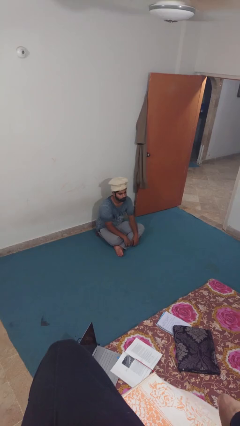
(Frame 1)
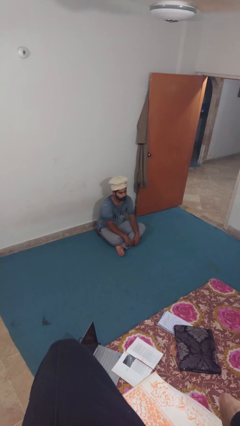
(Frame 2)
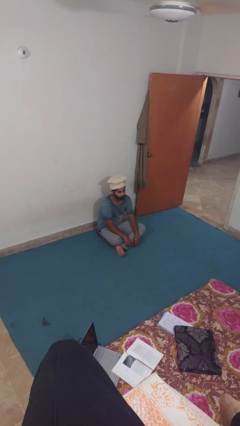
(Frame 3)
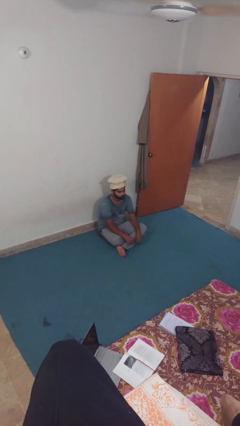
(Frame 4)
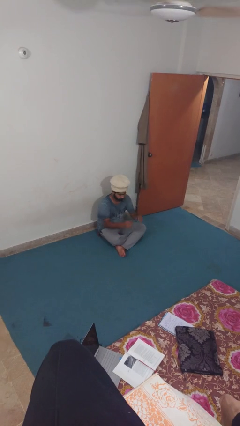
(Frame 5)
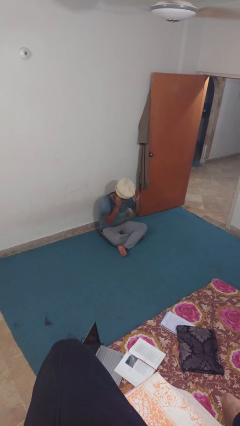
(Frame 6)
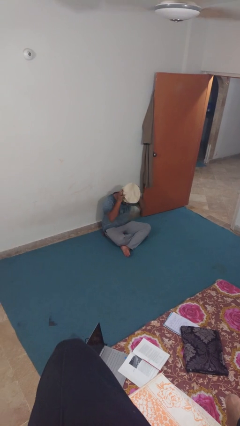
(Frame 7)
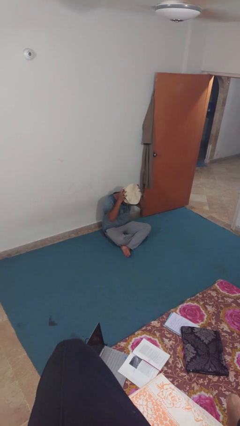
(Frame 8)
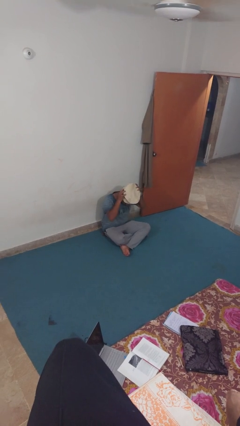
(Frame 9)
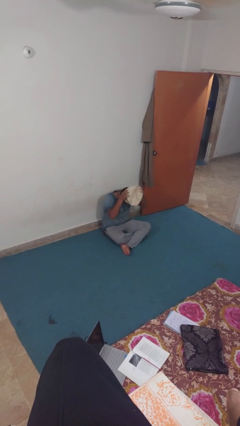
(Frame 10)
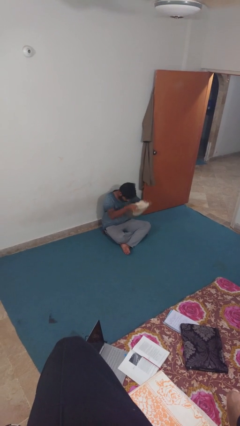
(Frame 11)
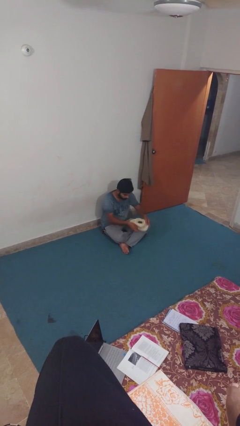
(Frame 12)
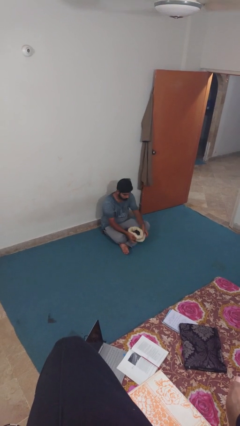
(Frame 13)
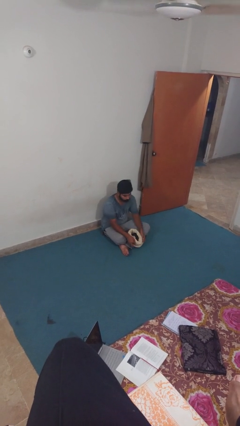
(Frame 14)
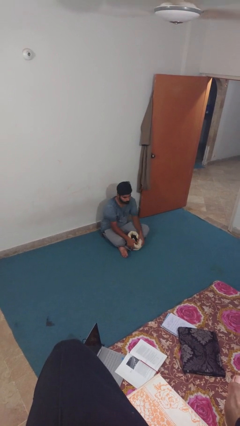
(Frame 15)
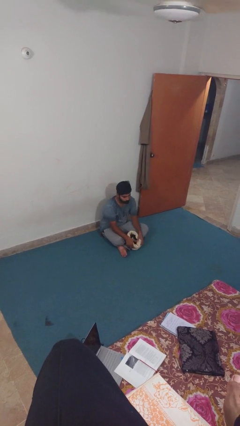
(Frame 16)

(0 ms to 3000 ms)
person takes off hat

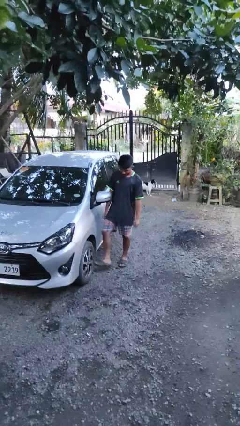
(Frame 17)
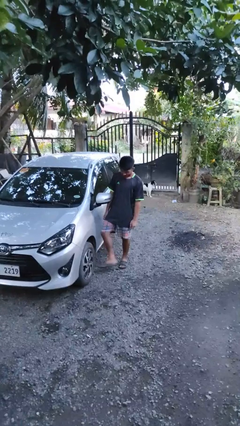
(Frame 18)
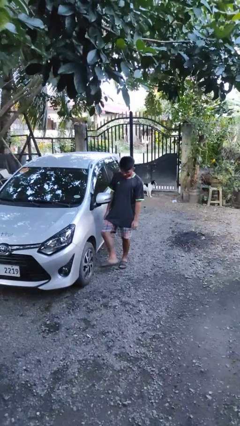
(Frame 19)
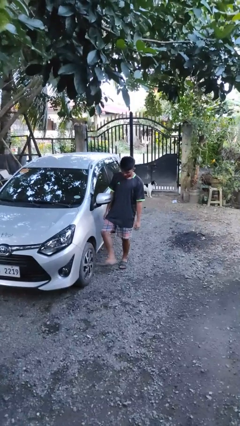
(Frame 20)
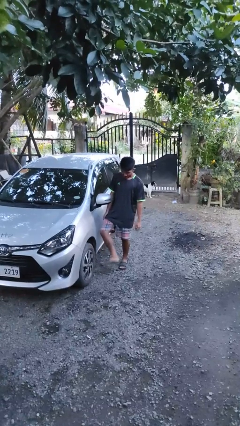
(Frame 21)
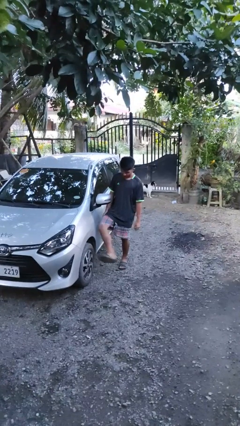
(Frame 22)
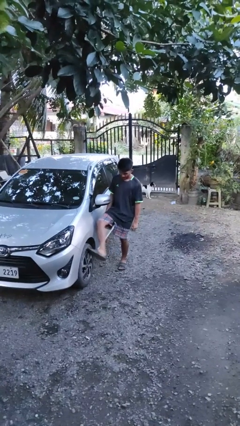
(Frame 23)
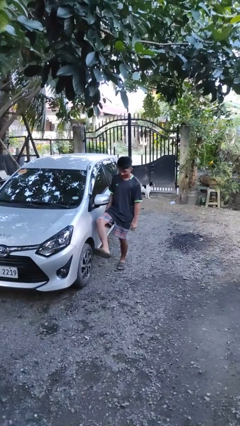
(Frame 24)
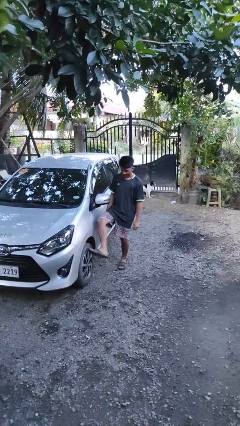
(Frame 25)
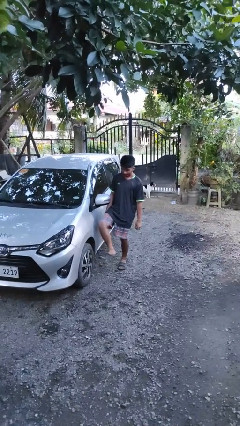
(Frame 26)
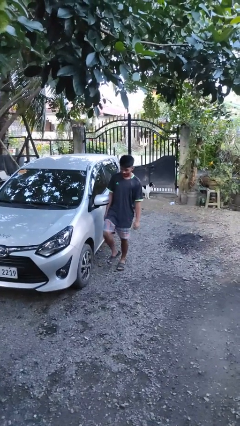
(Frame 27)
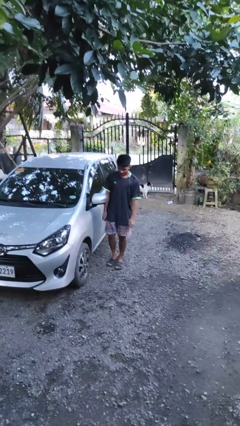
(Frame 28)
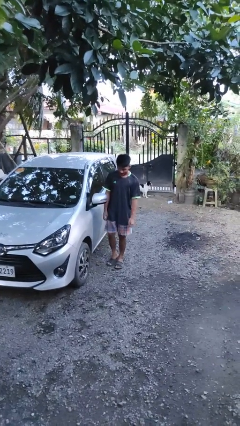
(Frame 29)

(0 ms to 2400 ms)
person kicks car tires

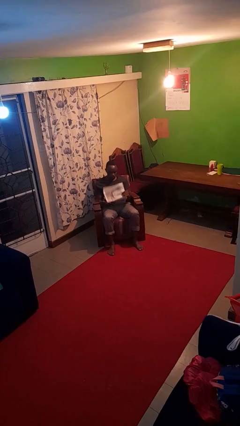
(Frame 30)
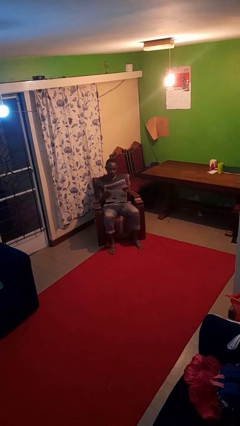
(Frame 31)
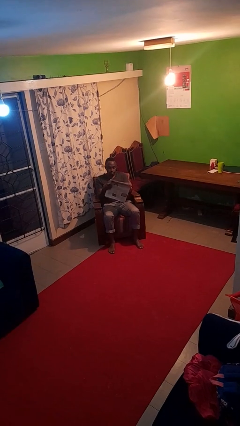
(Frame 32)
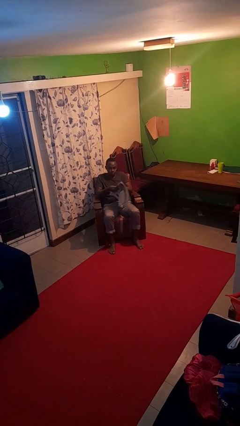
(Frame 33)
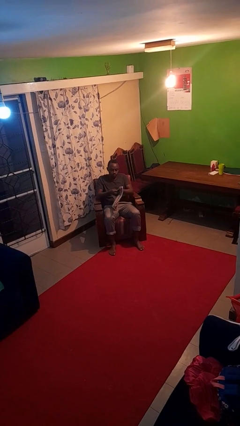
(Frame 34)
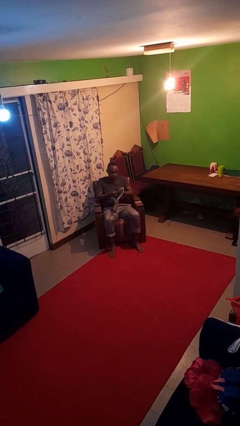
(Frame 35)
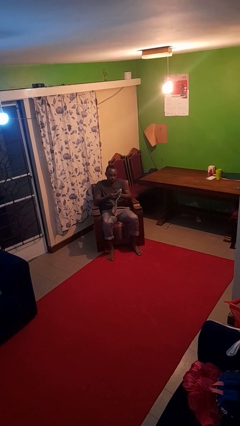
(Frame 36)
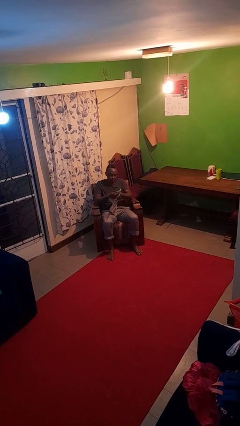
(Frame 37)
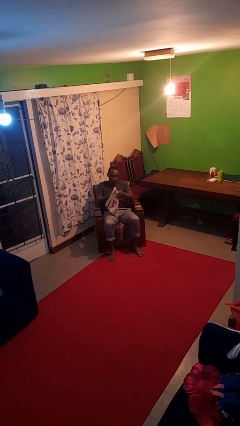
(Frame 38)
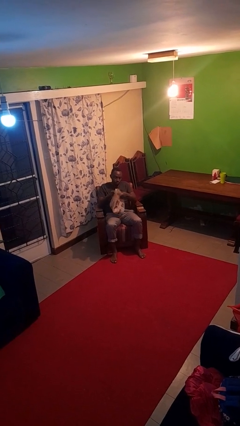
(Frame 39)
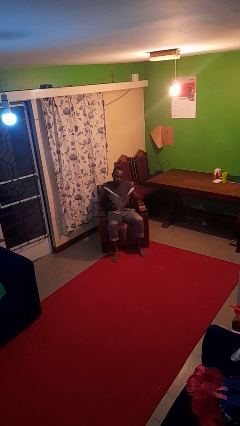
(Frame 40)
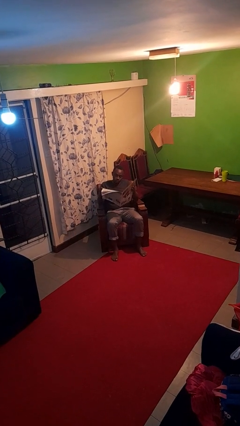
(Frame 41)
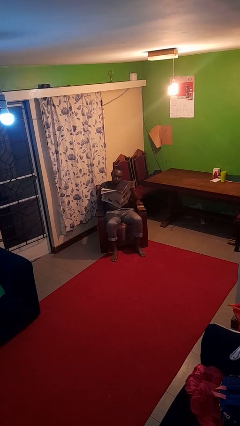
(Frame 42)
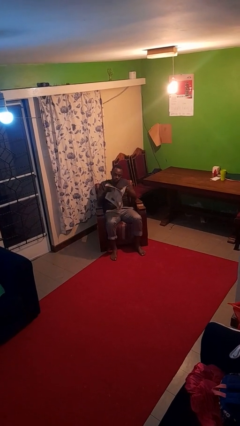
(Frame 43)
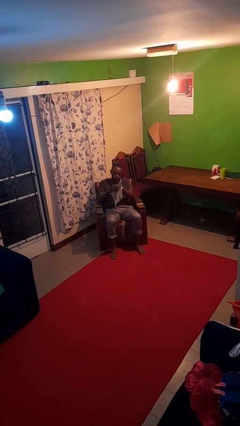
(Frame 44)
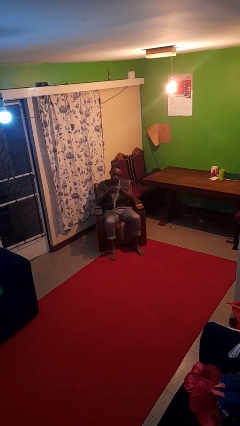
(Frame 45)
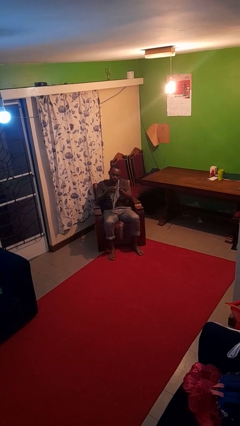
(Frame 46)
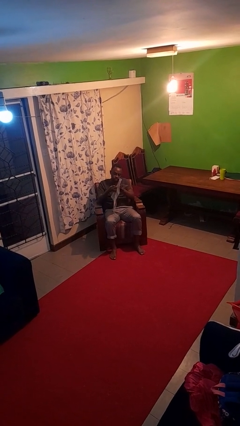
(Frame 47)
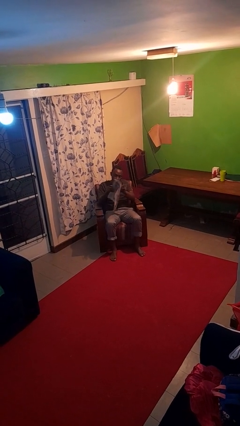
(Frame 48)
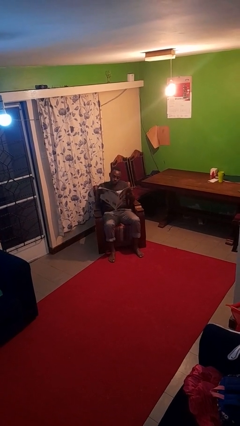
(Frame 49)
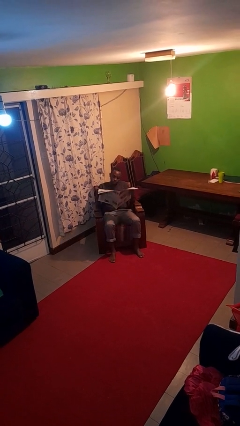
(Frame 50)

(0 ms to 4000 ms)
person reads newspaper

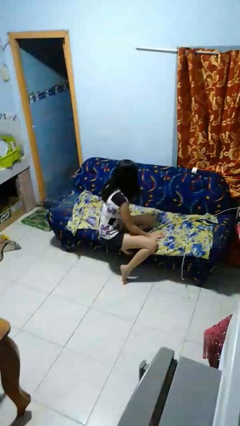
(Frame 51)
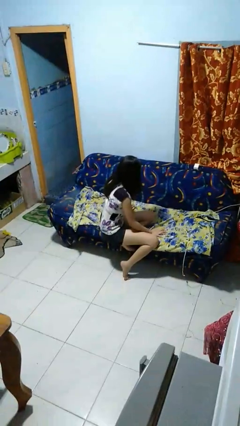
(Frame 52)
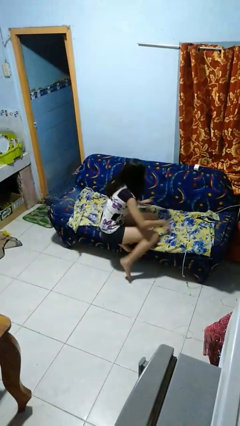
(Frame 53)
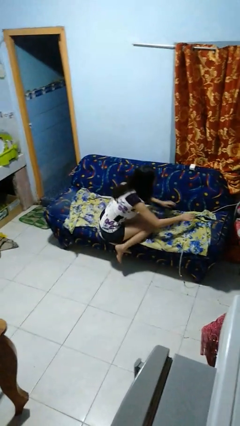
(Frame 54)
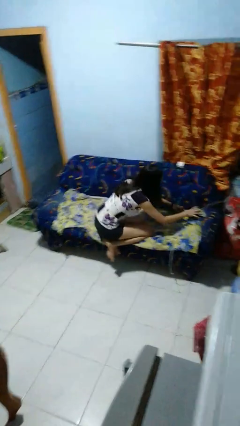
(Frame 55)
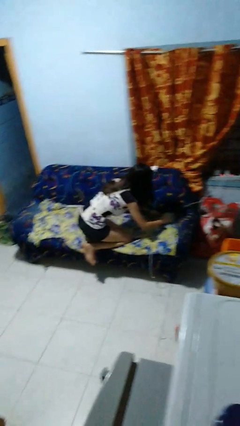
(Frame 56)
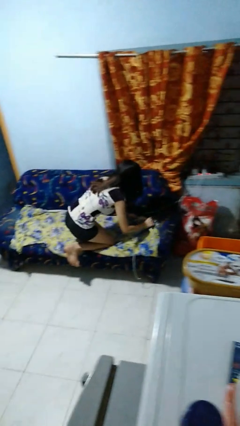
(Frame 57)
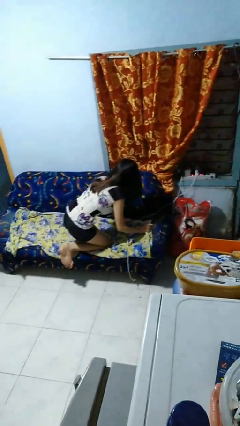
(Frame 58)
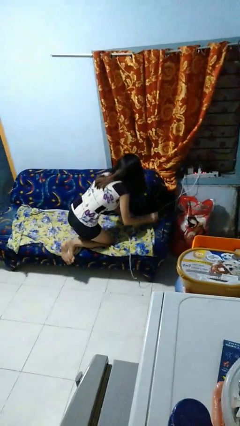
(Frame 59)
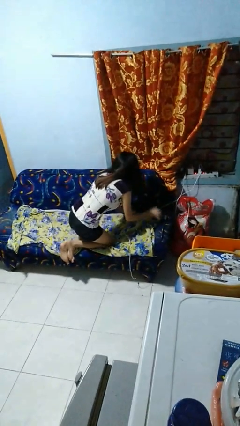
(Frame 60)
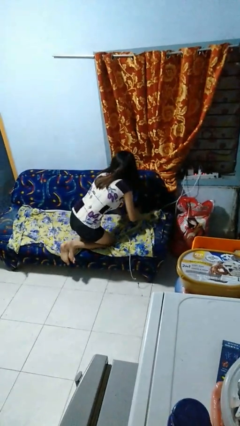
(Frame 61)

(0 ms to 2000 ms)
person searches in couch

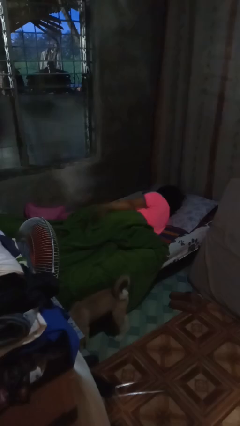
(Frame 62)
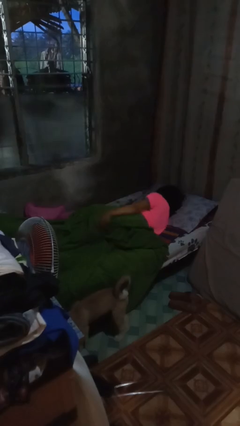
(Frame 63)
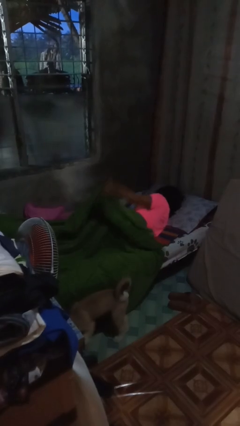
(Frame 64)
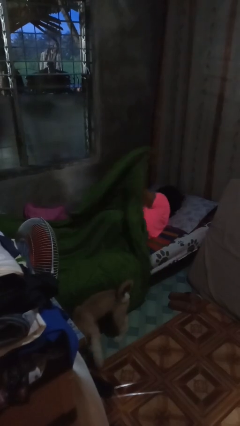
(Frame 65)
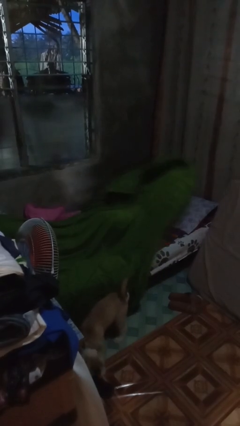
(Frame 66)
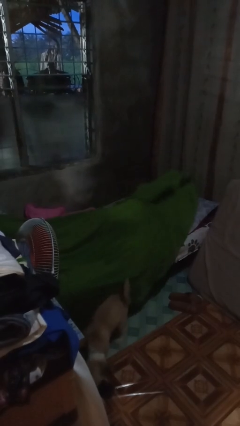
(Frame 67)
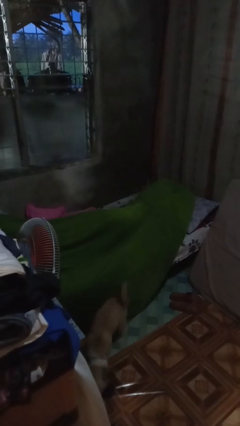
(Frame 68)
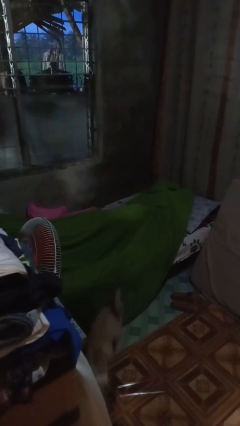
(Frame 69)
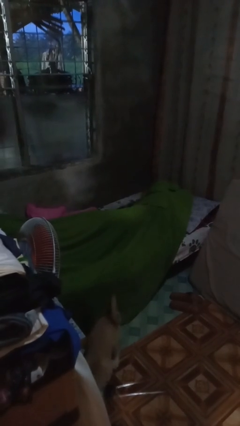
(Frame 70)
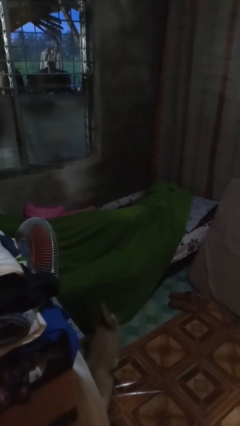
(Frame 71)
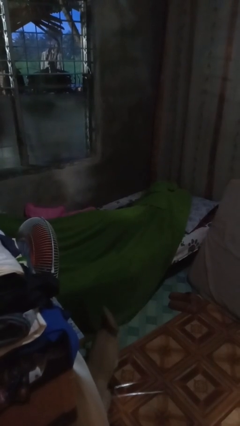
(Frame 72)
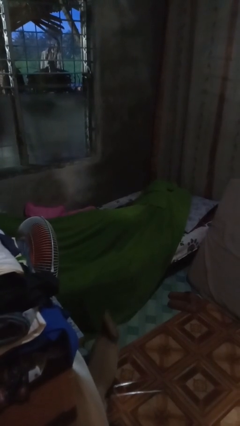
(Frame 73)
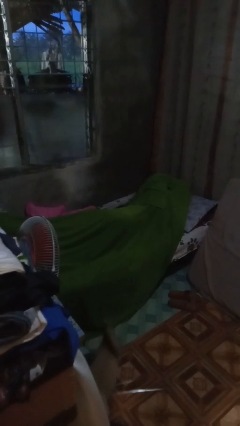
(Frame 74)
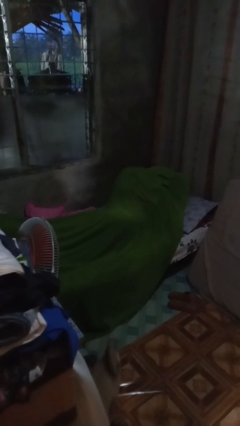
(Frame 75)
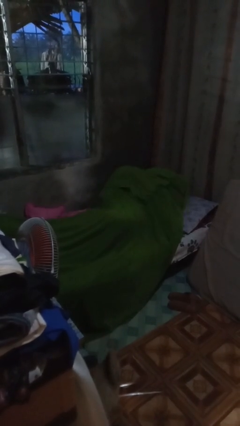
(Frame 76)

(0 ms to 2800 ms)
person covers with bedsheets

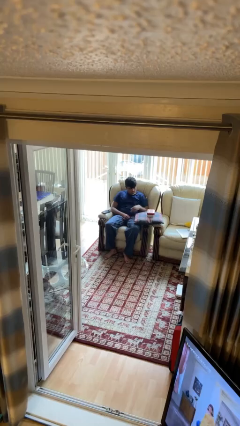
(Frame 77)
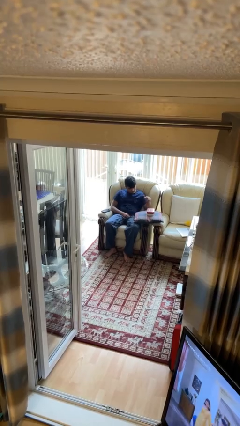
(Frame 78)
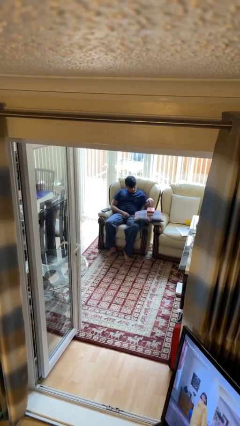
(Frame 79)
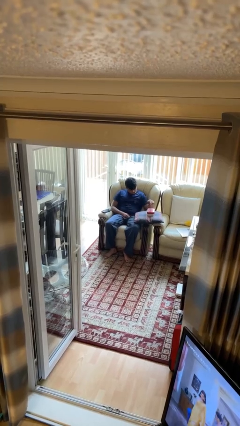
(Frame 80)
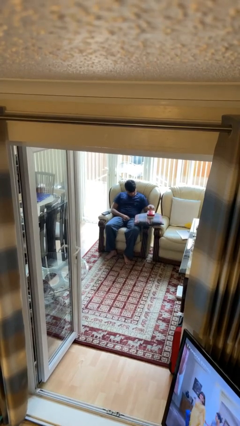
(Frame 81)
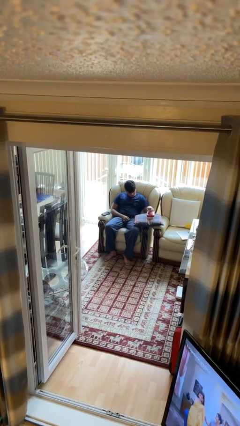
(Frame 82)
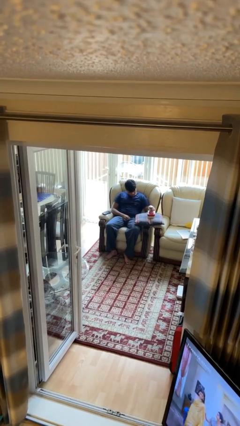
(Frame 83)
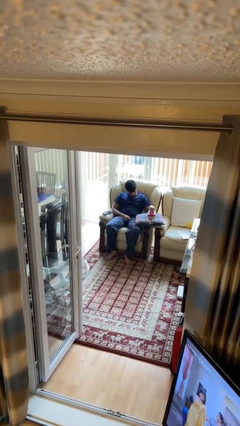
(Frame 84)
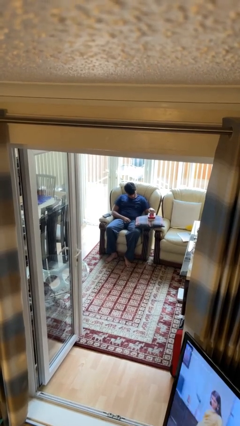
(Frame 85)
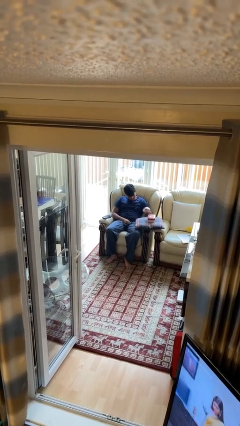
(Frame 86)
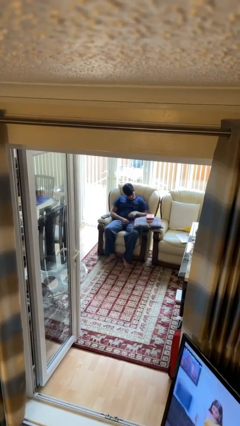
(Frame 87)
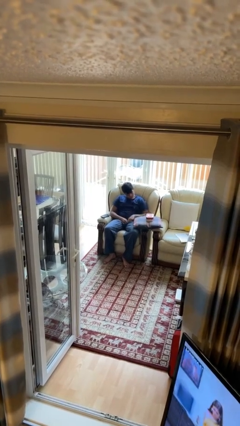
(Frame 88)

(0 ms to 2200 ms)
person taps object with finger

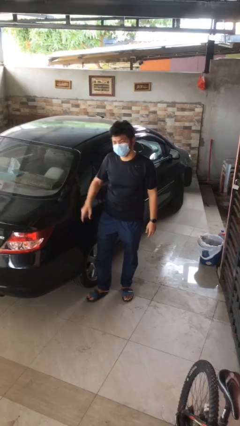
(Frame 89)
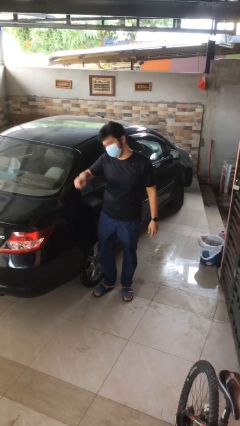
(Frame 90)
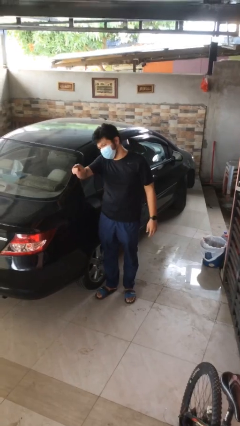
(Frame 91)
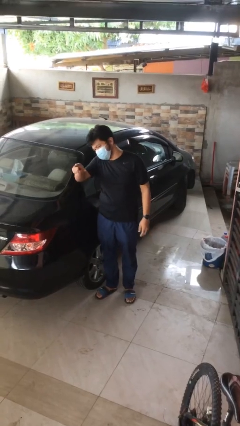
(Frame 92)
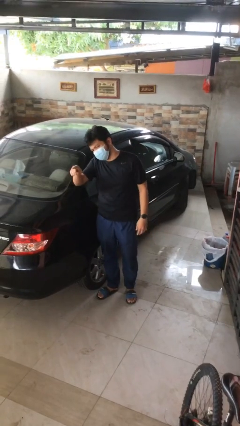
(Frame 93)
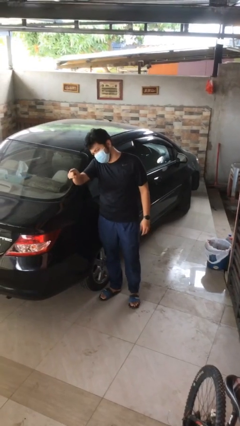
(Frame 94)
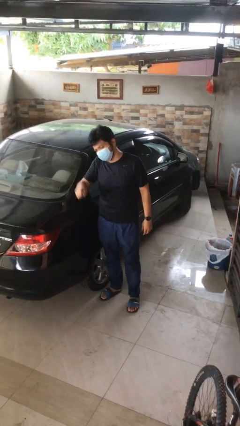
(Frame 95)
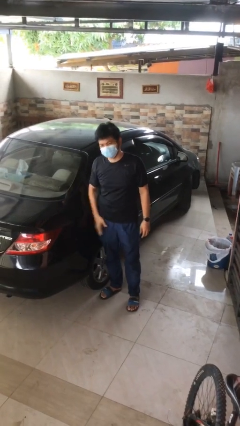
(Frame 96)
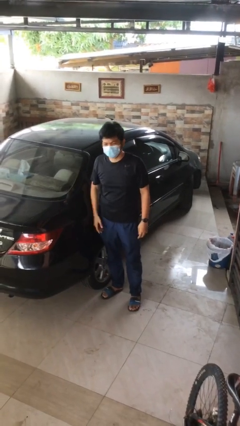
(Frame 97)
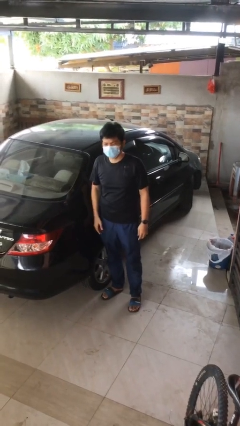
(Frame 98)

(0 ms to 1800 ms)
person points at person
